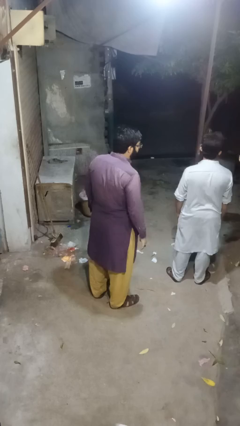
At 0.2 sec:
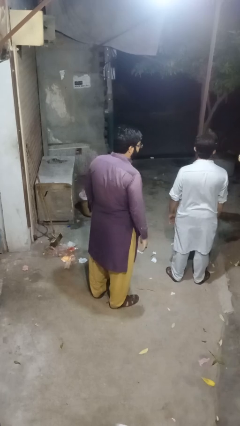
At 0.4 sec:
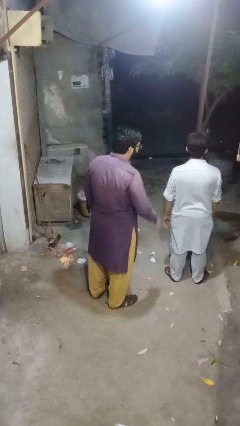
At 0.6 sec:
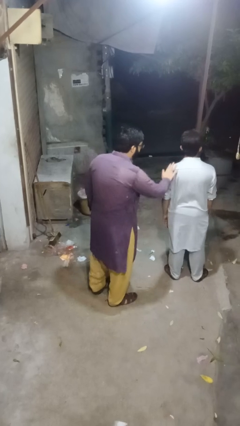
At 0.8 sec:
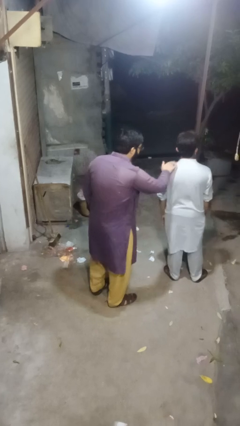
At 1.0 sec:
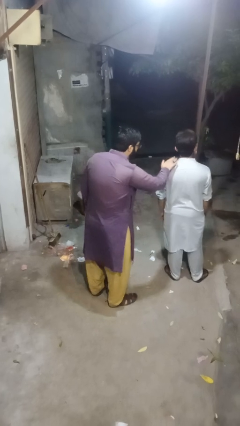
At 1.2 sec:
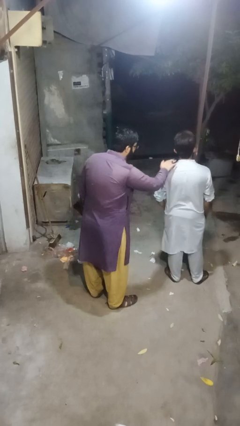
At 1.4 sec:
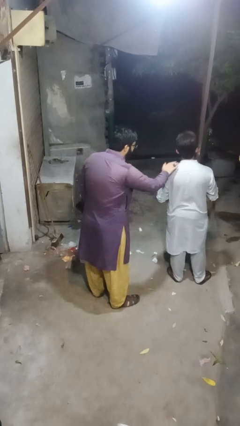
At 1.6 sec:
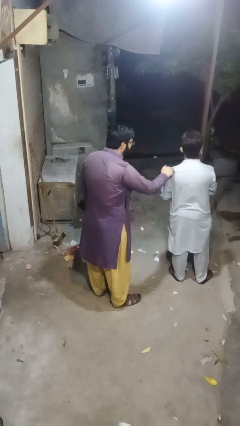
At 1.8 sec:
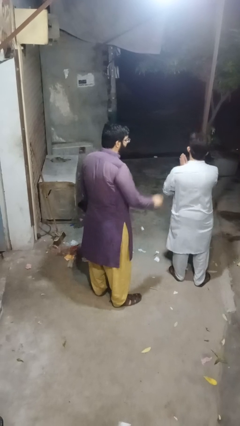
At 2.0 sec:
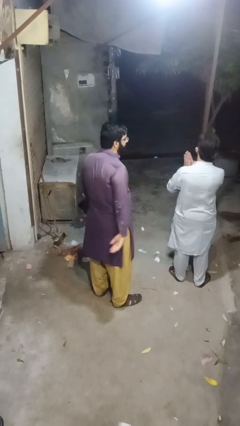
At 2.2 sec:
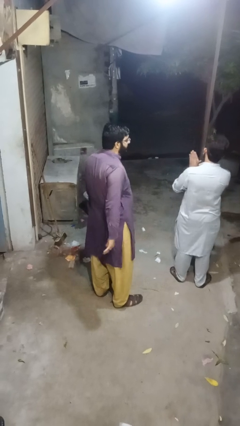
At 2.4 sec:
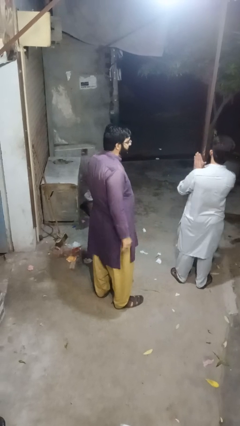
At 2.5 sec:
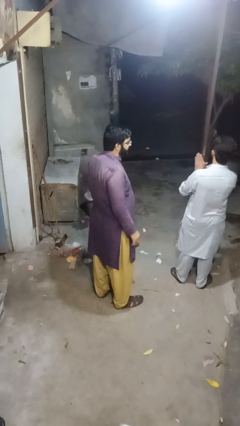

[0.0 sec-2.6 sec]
person touches back of person

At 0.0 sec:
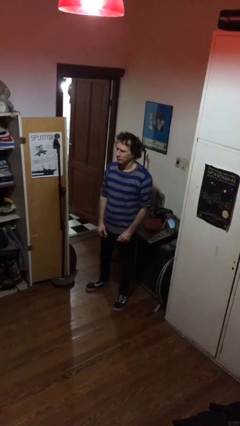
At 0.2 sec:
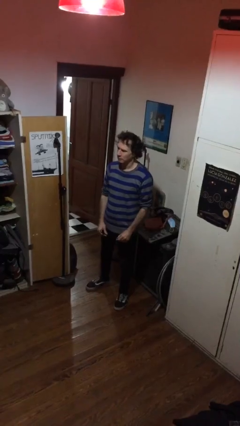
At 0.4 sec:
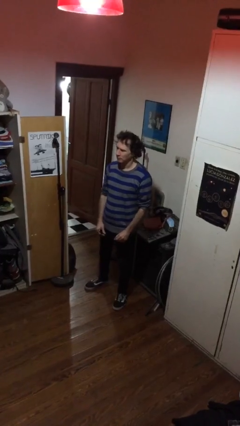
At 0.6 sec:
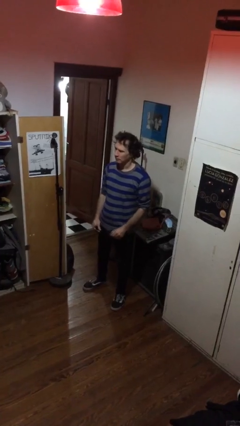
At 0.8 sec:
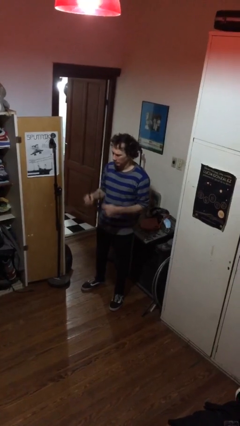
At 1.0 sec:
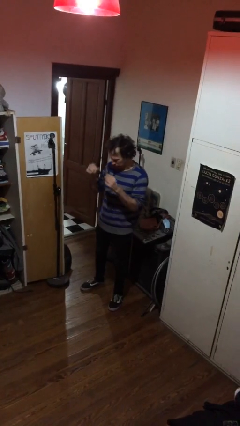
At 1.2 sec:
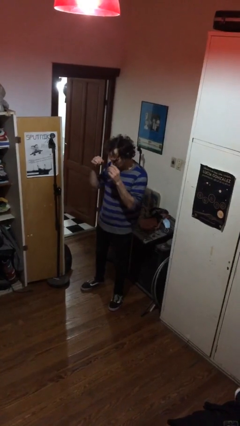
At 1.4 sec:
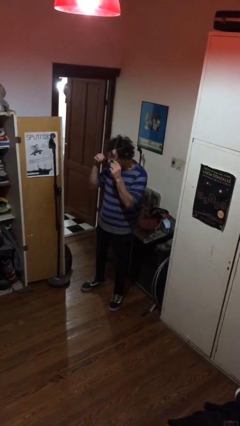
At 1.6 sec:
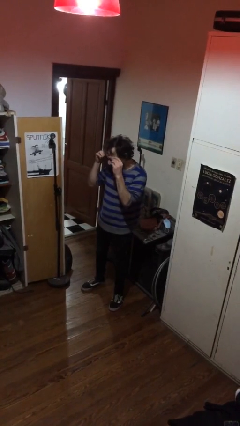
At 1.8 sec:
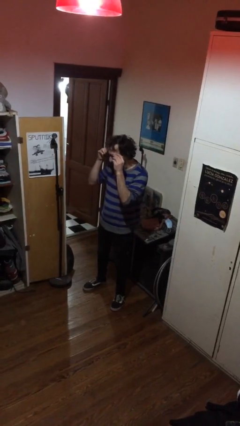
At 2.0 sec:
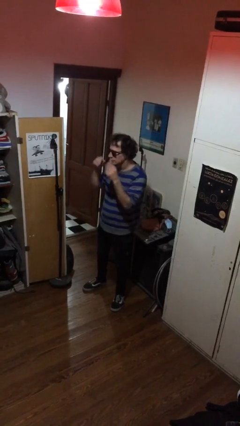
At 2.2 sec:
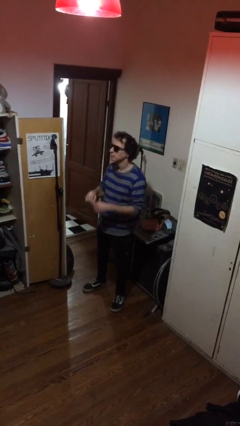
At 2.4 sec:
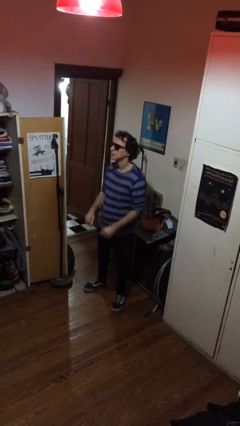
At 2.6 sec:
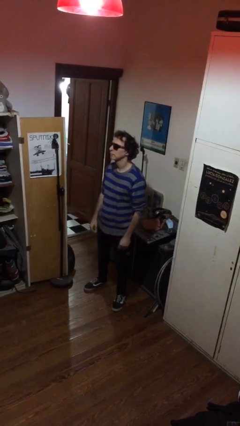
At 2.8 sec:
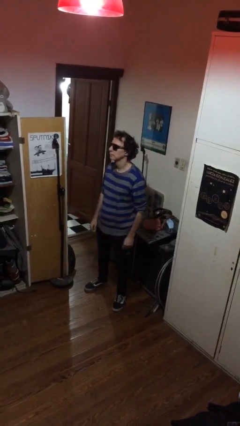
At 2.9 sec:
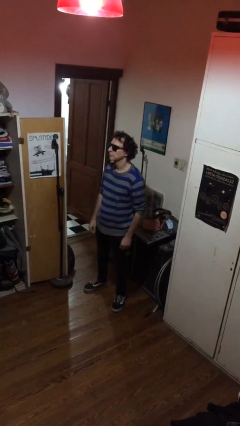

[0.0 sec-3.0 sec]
person puts on sunglasses

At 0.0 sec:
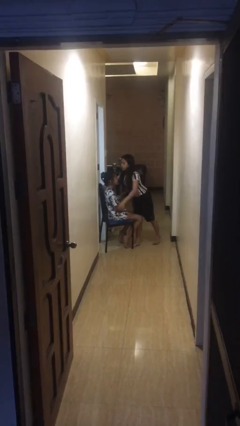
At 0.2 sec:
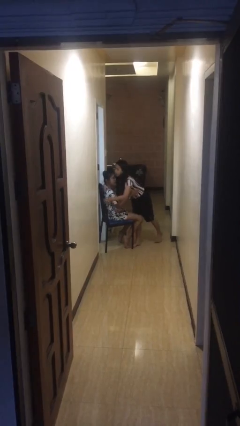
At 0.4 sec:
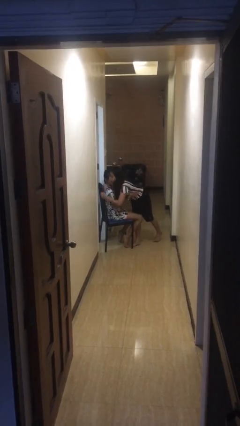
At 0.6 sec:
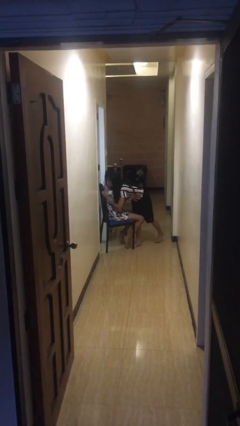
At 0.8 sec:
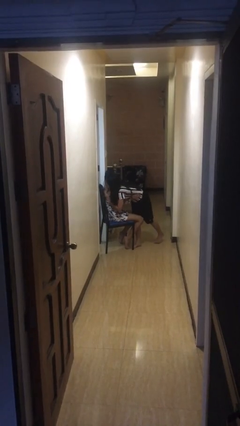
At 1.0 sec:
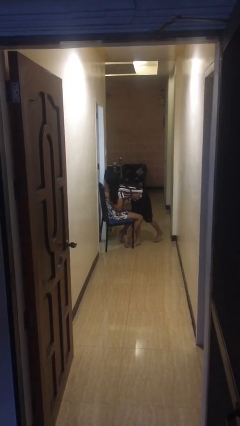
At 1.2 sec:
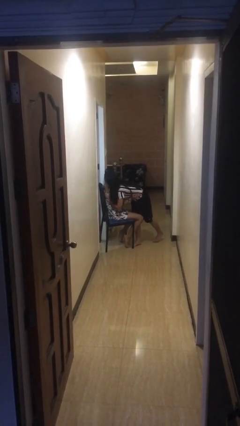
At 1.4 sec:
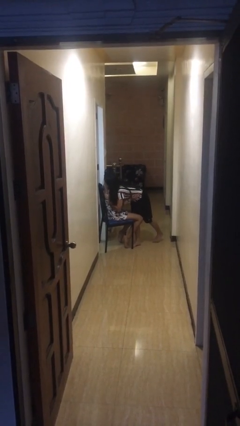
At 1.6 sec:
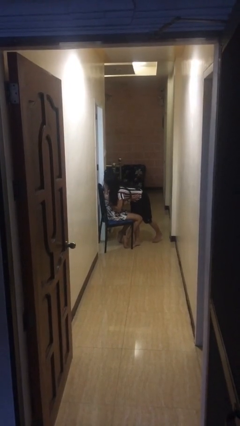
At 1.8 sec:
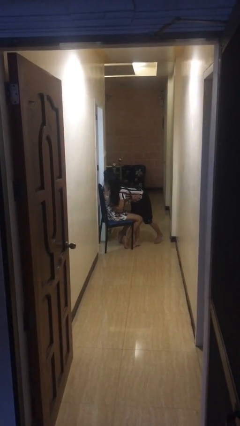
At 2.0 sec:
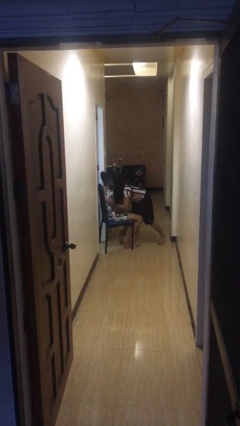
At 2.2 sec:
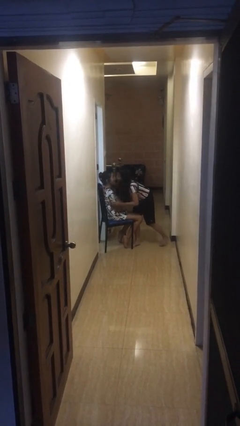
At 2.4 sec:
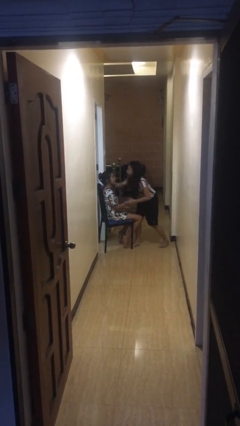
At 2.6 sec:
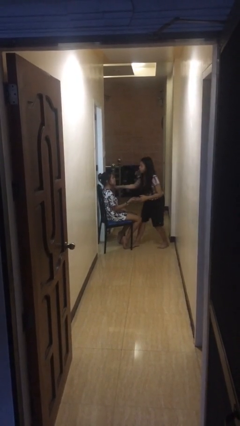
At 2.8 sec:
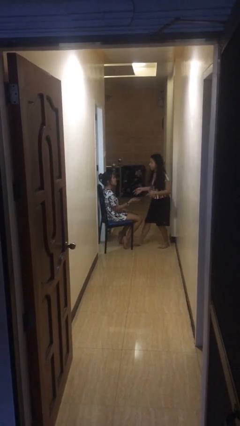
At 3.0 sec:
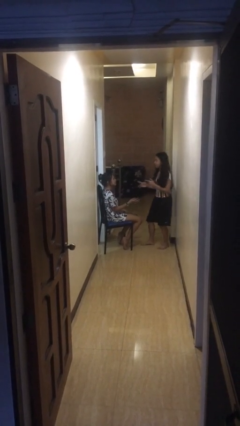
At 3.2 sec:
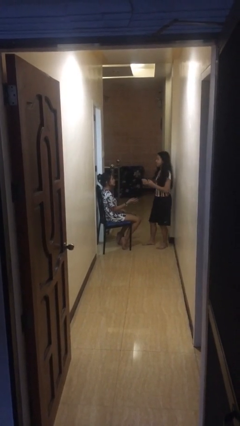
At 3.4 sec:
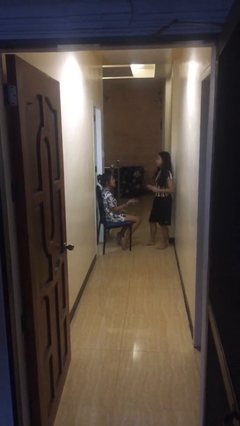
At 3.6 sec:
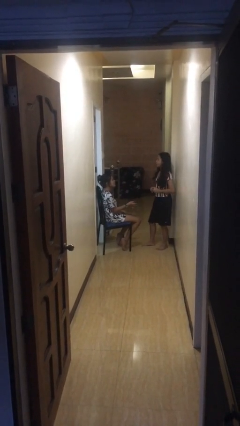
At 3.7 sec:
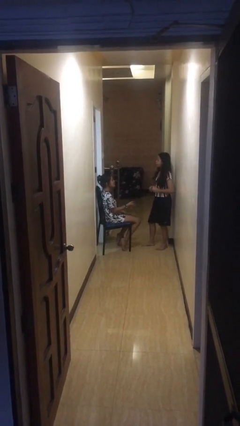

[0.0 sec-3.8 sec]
person embraces person

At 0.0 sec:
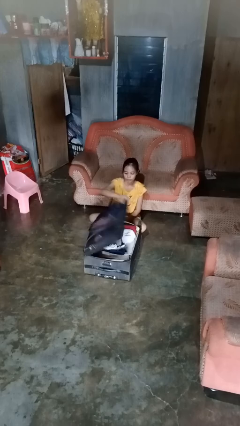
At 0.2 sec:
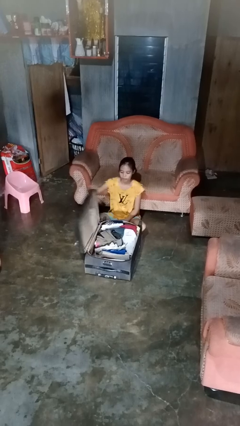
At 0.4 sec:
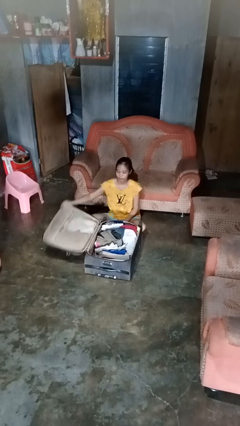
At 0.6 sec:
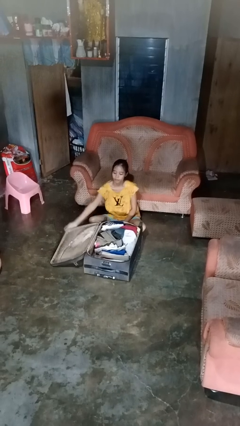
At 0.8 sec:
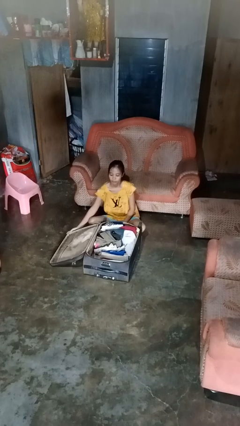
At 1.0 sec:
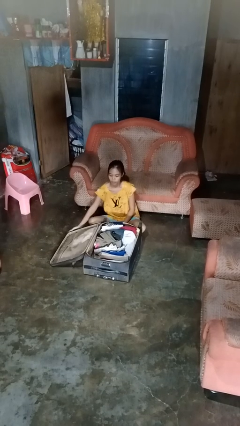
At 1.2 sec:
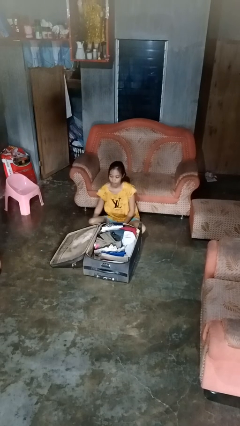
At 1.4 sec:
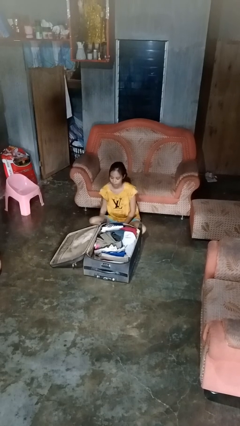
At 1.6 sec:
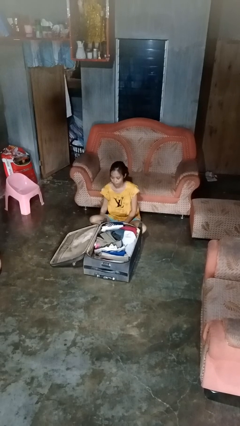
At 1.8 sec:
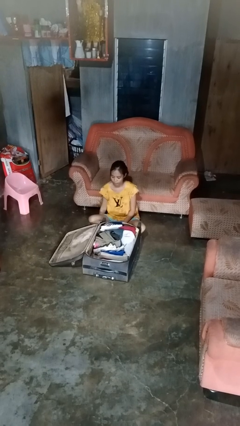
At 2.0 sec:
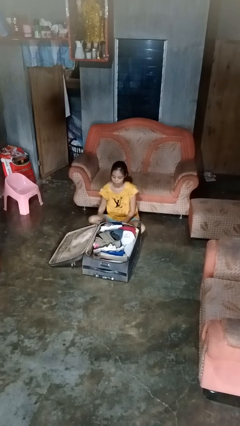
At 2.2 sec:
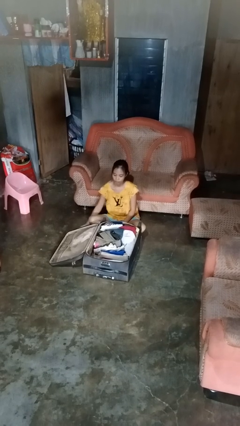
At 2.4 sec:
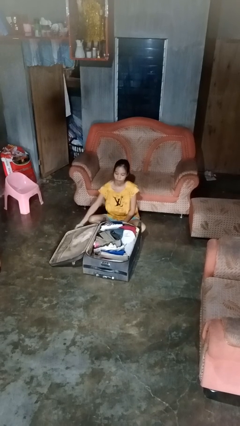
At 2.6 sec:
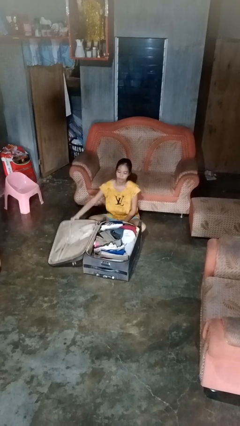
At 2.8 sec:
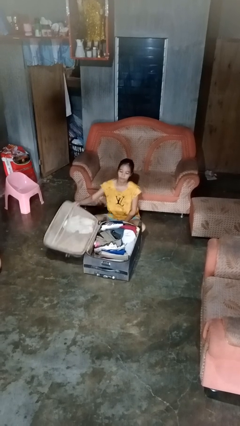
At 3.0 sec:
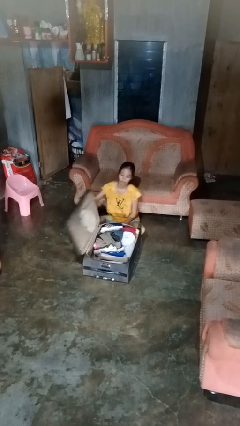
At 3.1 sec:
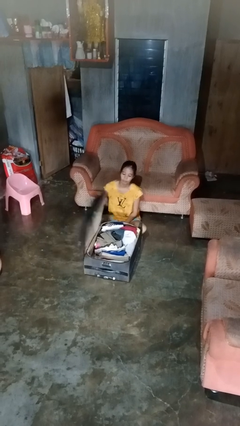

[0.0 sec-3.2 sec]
person opens suitcase

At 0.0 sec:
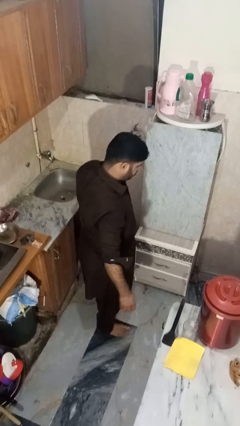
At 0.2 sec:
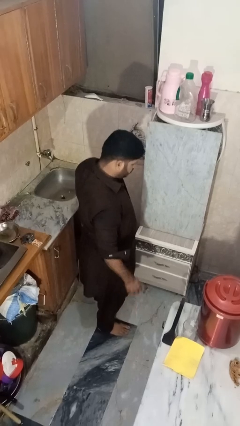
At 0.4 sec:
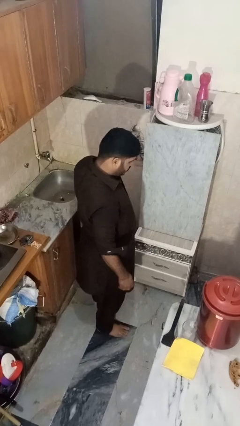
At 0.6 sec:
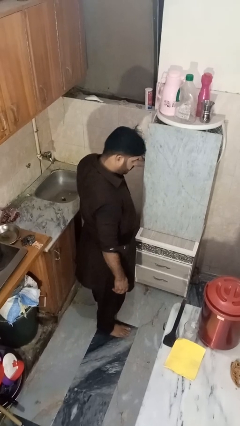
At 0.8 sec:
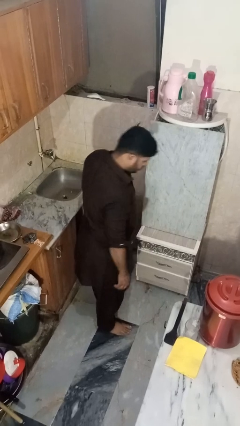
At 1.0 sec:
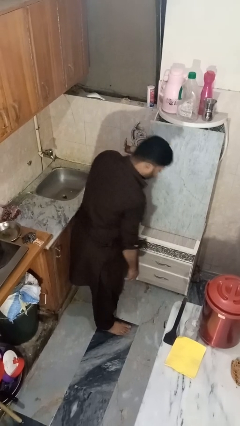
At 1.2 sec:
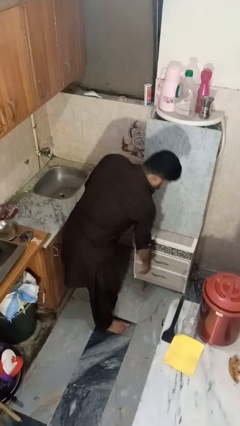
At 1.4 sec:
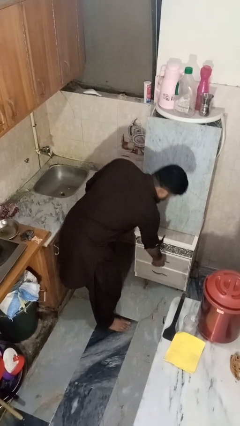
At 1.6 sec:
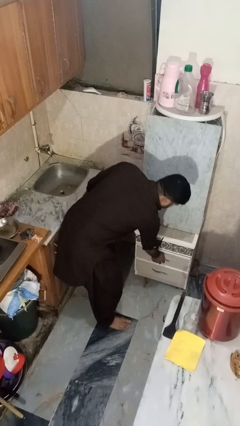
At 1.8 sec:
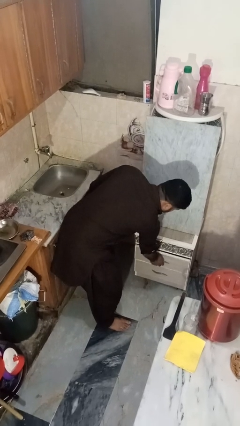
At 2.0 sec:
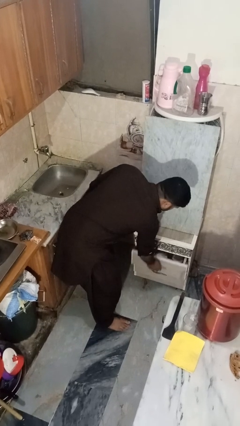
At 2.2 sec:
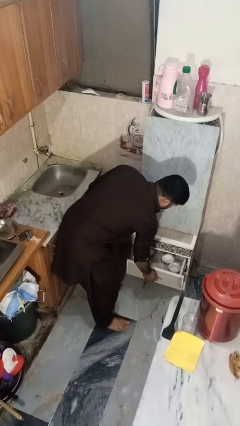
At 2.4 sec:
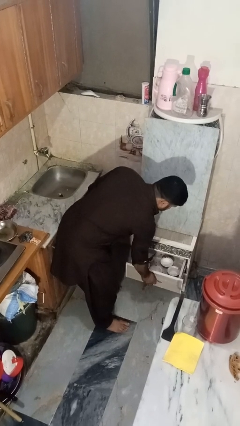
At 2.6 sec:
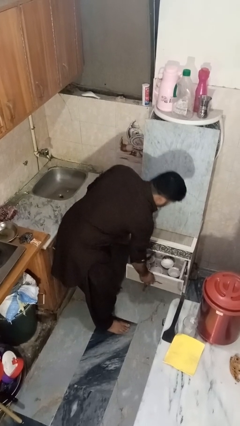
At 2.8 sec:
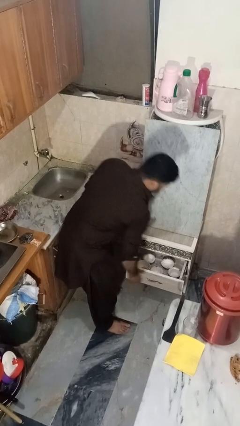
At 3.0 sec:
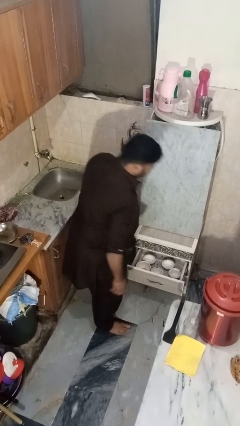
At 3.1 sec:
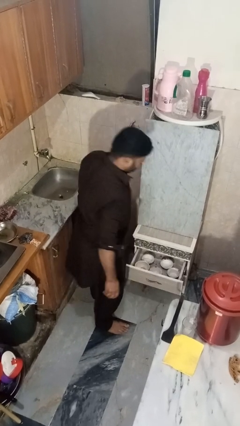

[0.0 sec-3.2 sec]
person opens kitchen drawer

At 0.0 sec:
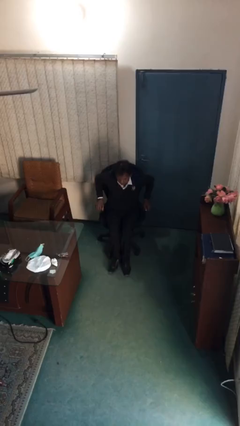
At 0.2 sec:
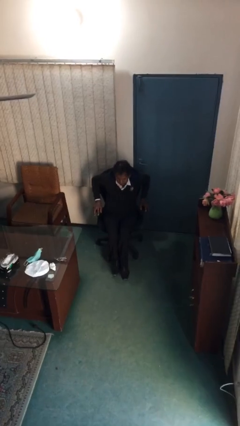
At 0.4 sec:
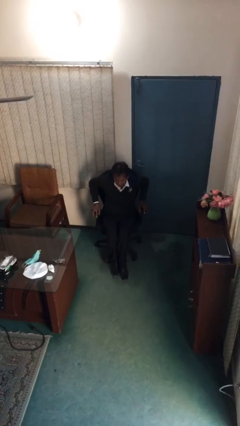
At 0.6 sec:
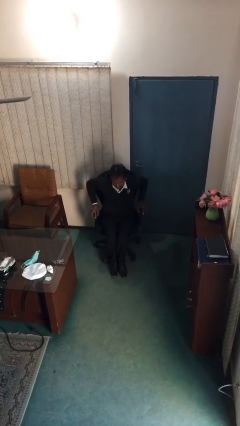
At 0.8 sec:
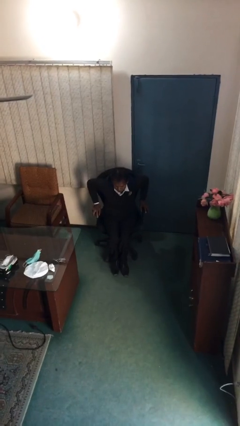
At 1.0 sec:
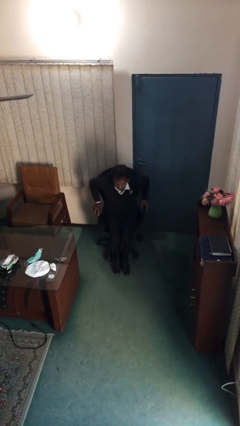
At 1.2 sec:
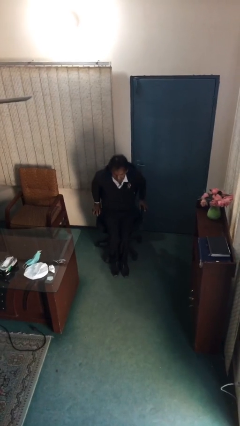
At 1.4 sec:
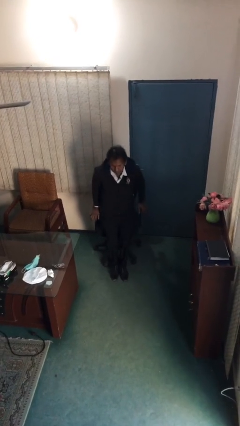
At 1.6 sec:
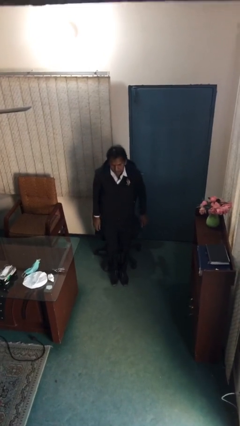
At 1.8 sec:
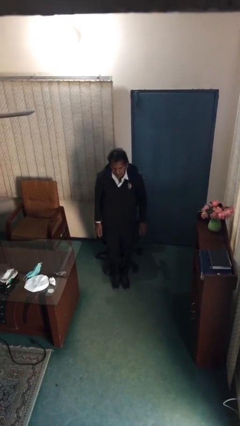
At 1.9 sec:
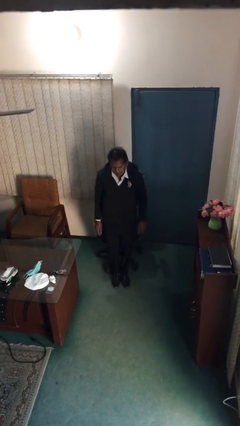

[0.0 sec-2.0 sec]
person stands up
